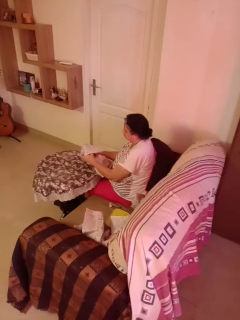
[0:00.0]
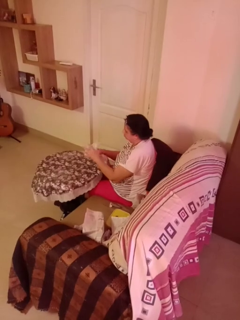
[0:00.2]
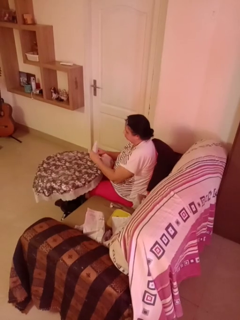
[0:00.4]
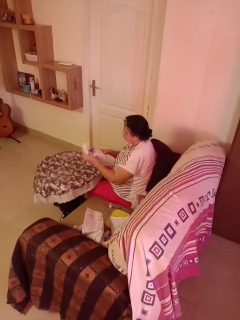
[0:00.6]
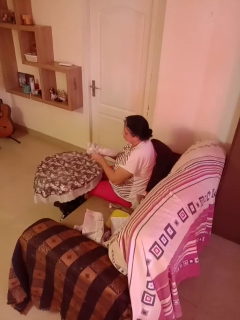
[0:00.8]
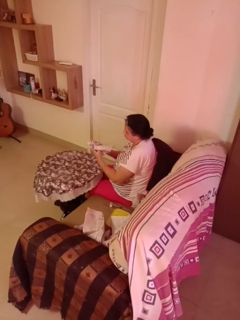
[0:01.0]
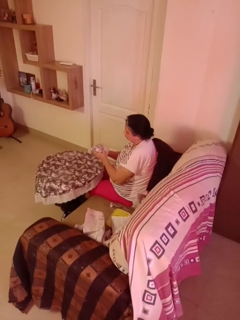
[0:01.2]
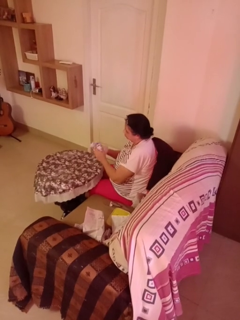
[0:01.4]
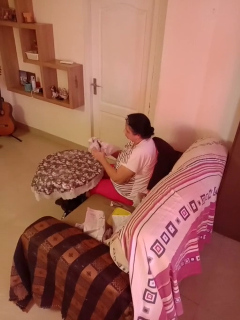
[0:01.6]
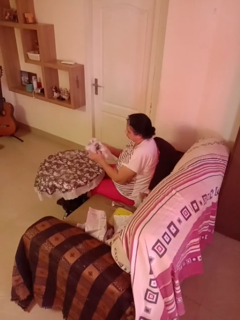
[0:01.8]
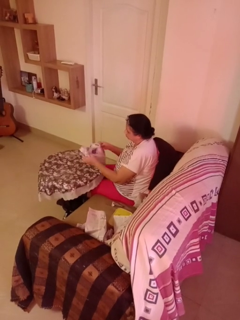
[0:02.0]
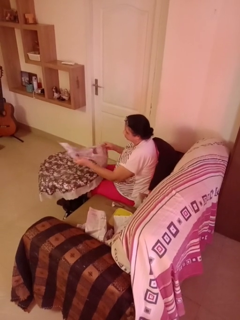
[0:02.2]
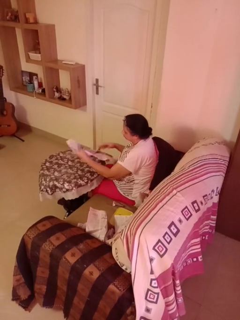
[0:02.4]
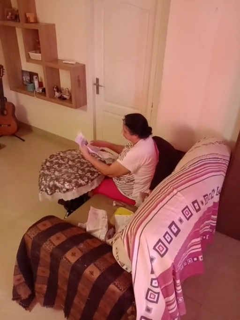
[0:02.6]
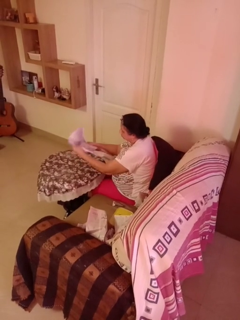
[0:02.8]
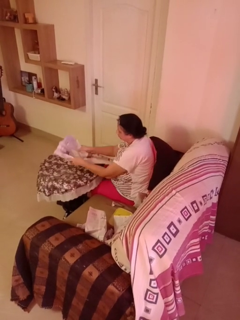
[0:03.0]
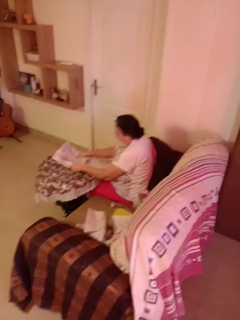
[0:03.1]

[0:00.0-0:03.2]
person crumples paper

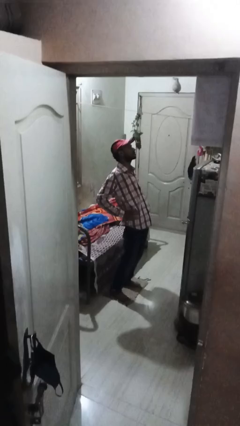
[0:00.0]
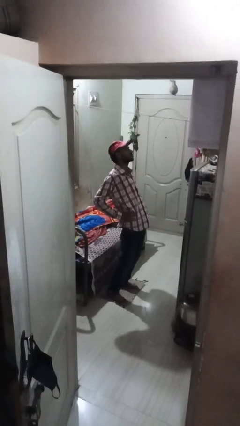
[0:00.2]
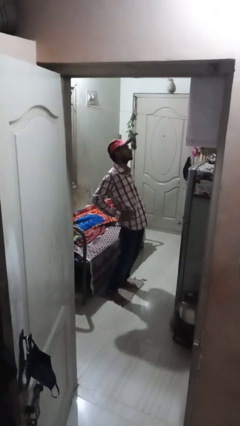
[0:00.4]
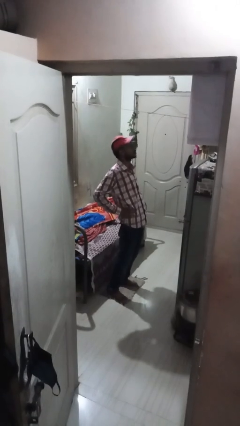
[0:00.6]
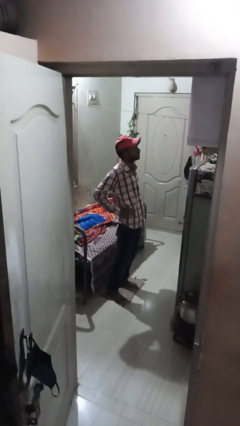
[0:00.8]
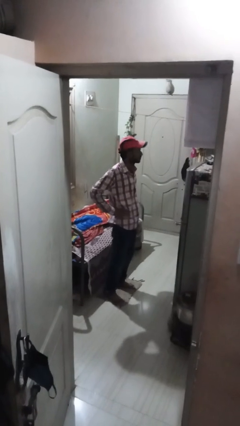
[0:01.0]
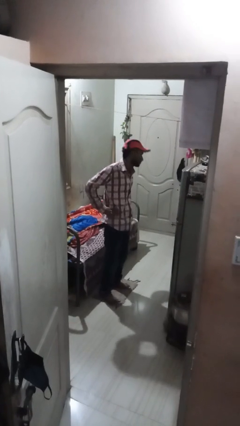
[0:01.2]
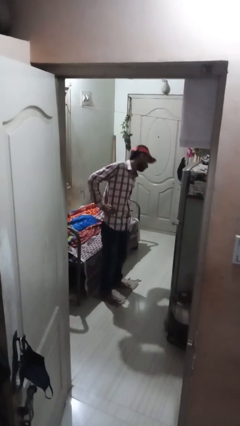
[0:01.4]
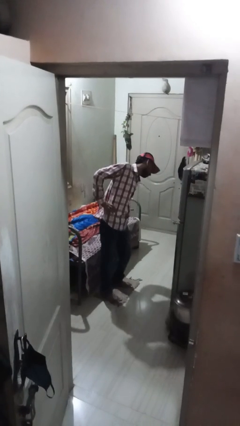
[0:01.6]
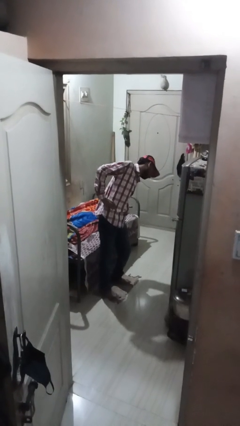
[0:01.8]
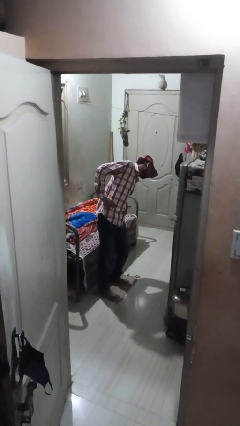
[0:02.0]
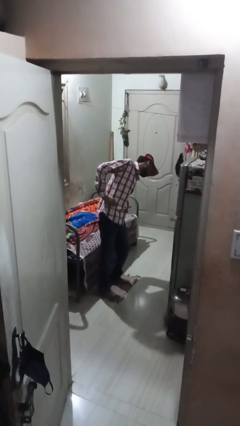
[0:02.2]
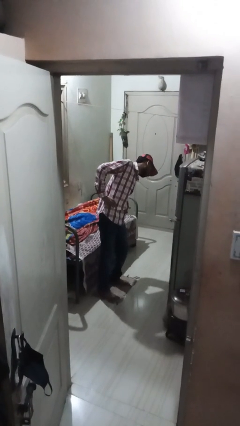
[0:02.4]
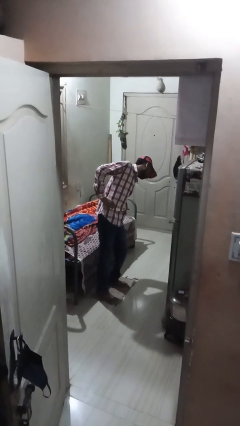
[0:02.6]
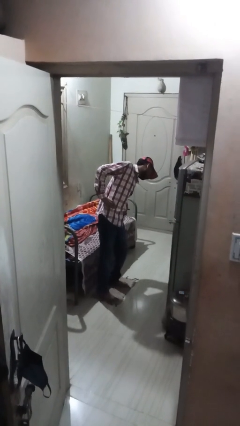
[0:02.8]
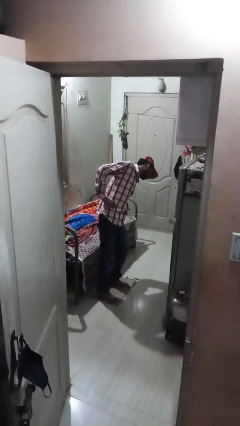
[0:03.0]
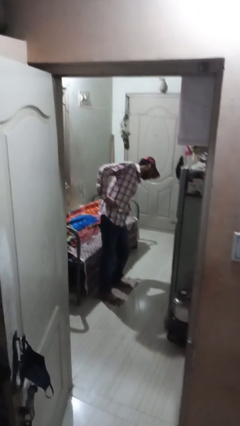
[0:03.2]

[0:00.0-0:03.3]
person stretches arms to side

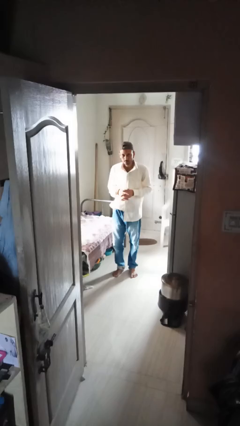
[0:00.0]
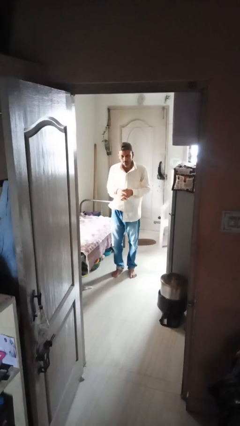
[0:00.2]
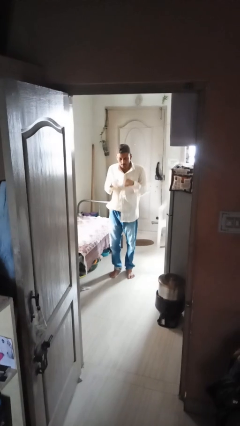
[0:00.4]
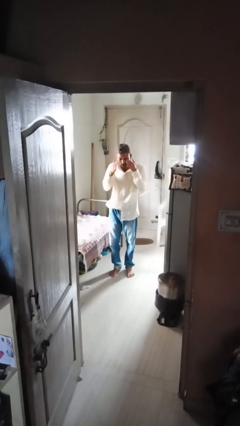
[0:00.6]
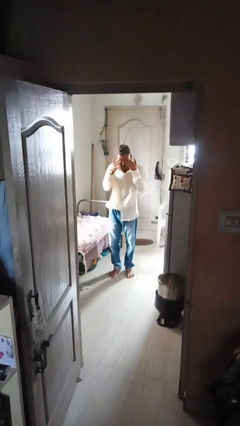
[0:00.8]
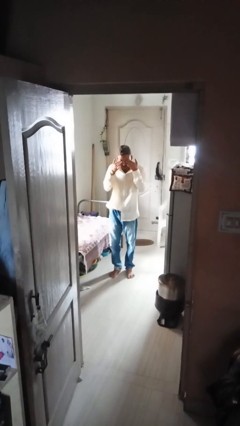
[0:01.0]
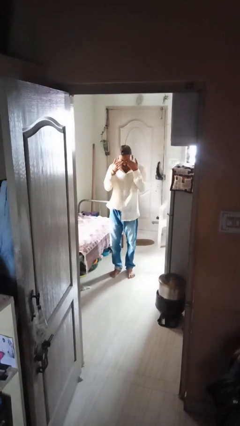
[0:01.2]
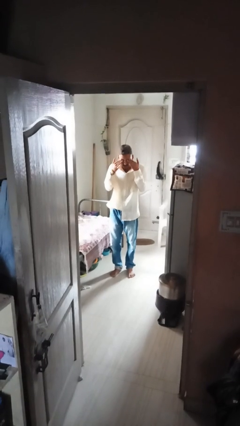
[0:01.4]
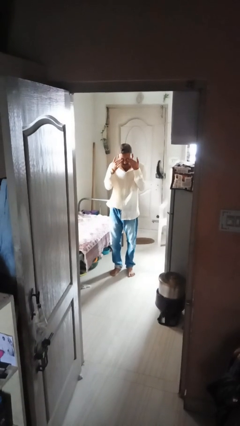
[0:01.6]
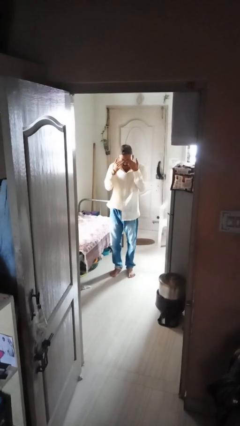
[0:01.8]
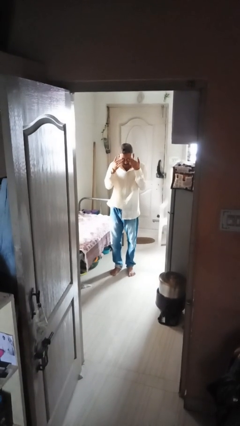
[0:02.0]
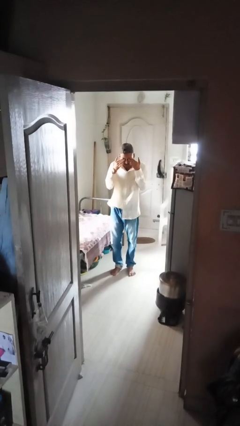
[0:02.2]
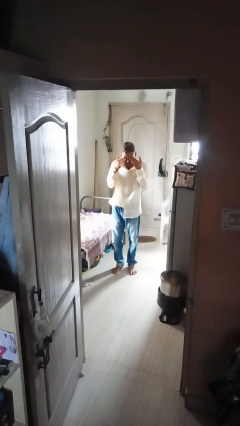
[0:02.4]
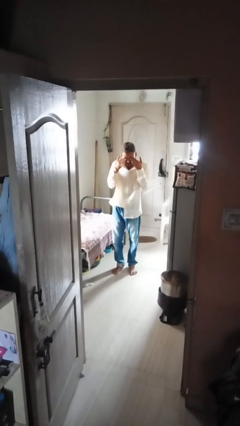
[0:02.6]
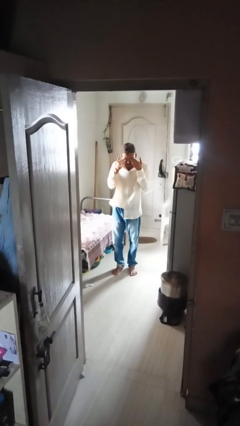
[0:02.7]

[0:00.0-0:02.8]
person rubs eyes

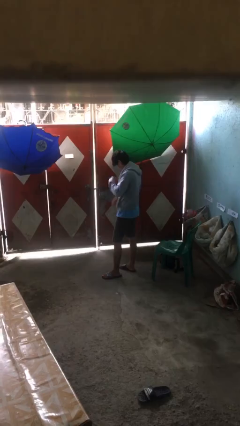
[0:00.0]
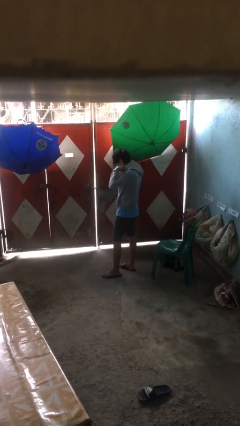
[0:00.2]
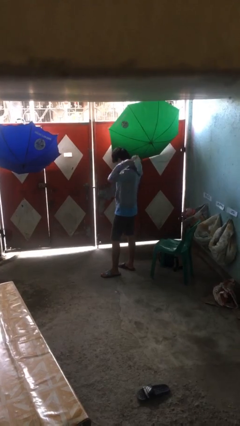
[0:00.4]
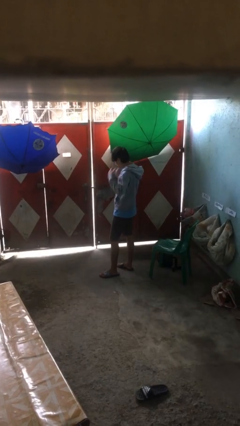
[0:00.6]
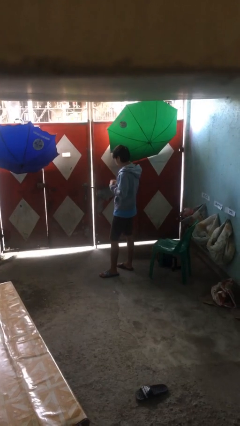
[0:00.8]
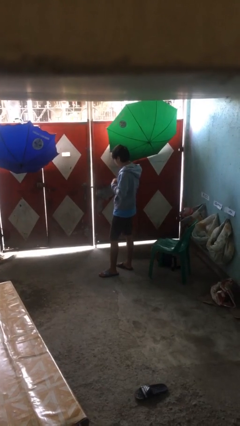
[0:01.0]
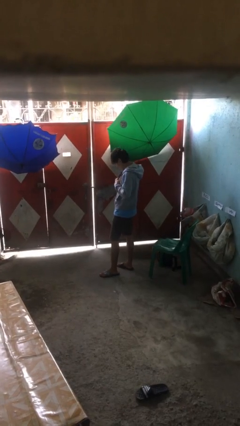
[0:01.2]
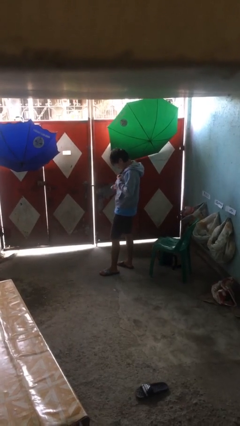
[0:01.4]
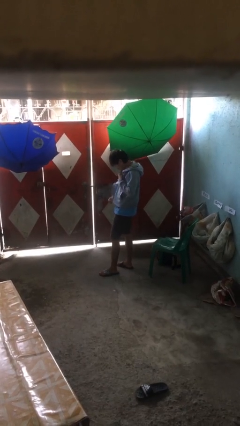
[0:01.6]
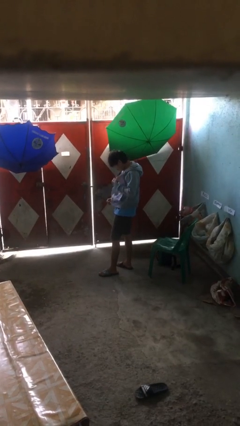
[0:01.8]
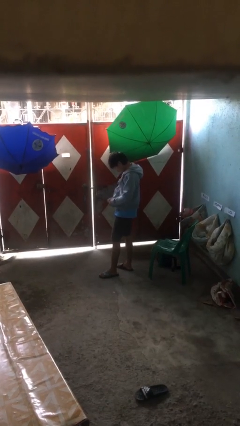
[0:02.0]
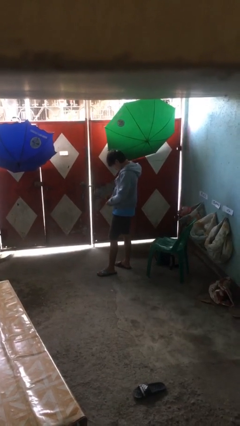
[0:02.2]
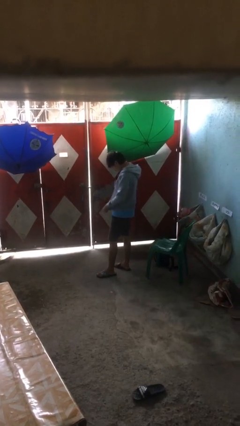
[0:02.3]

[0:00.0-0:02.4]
person unzips jacket

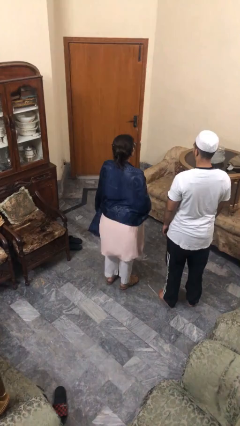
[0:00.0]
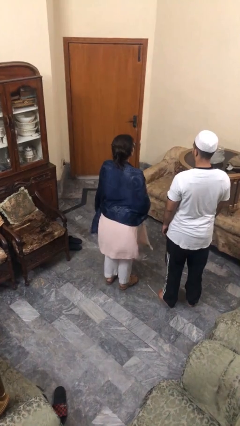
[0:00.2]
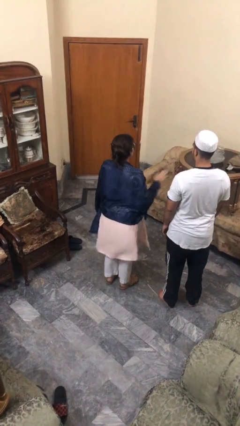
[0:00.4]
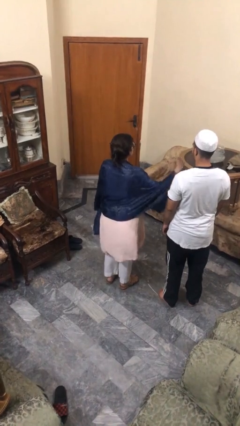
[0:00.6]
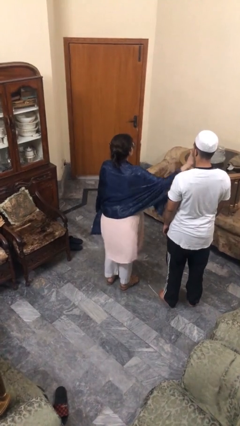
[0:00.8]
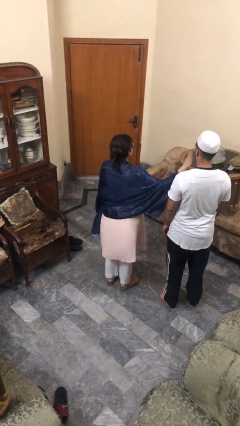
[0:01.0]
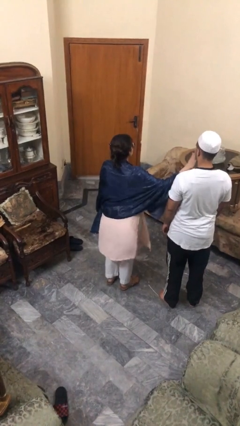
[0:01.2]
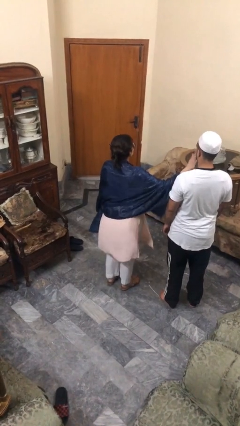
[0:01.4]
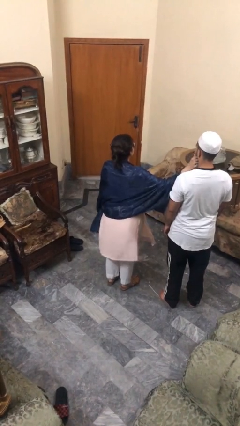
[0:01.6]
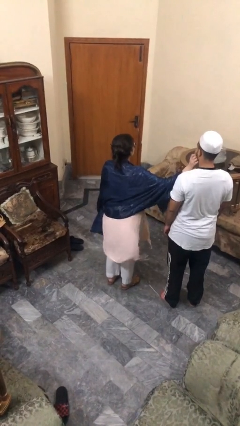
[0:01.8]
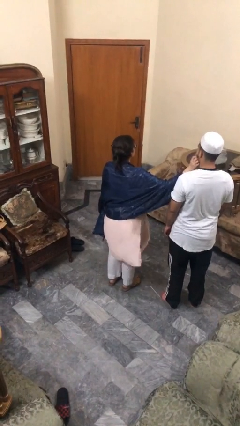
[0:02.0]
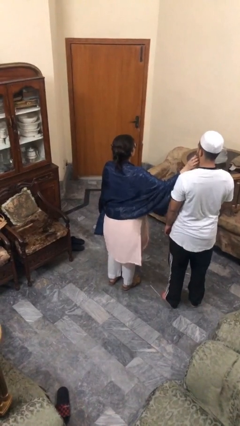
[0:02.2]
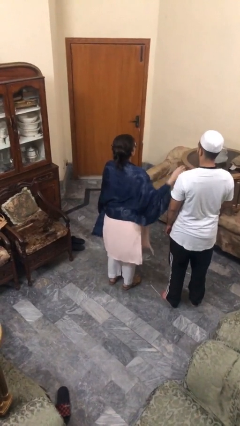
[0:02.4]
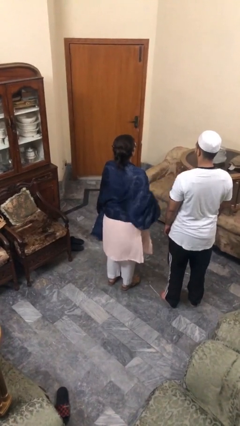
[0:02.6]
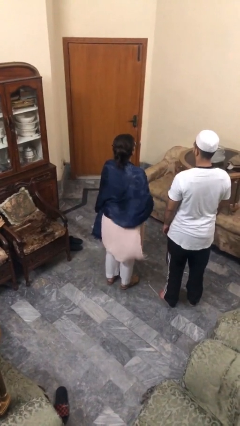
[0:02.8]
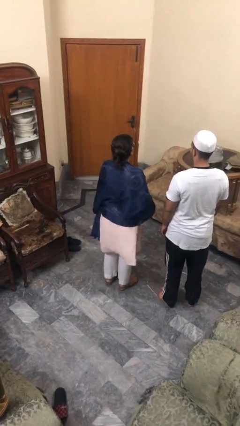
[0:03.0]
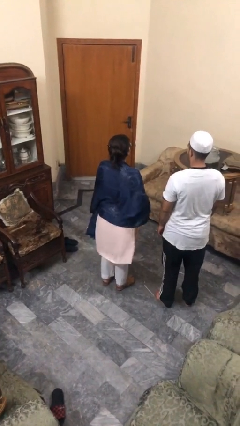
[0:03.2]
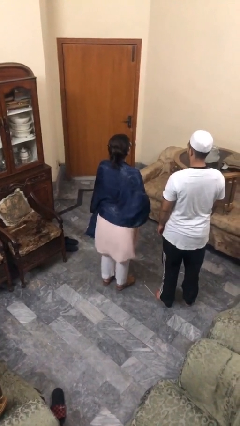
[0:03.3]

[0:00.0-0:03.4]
person touches face of person

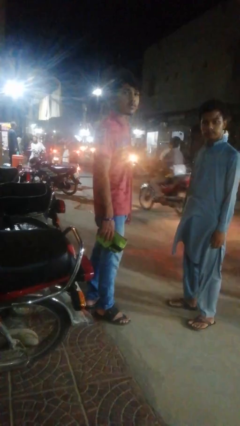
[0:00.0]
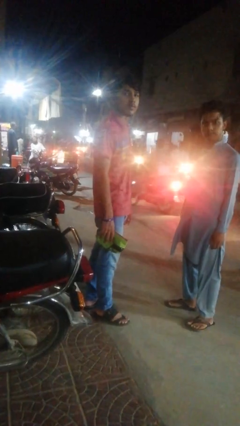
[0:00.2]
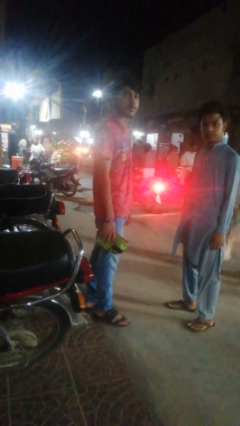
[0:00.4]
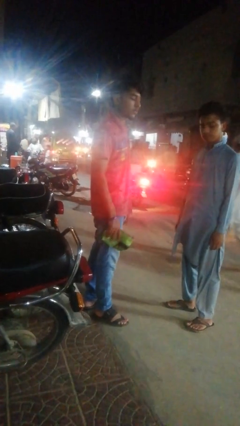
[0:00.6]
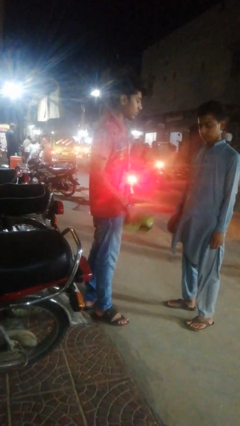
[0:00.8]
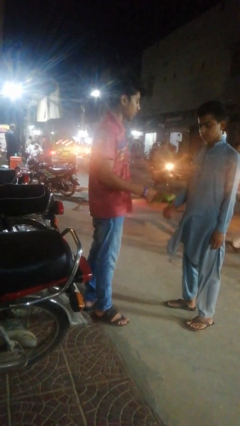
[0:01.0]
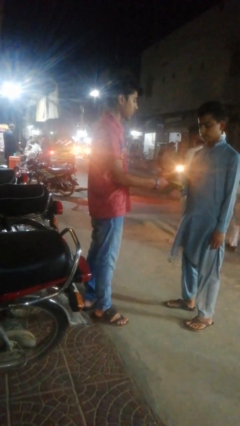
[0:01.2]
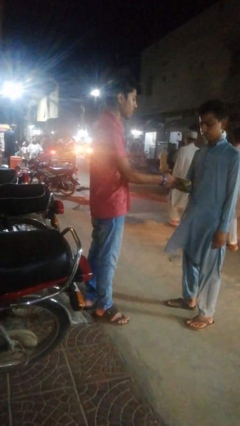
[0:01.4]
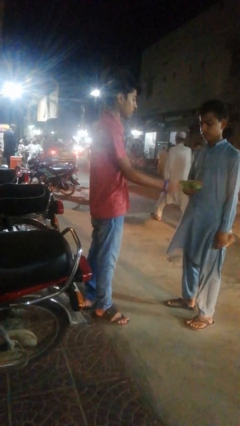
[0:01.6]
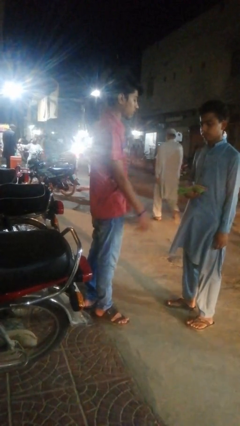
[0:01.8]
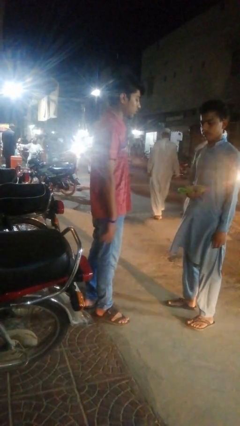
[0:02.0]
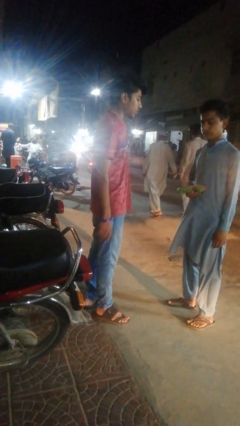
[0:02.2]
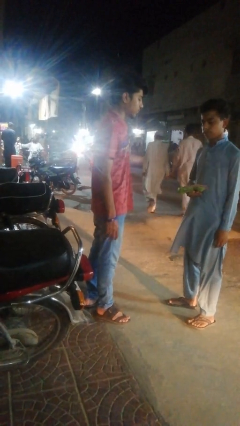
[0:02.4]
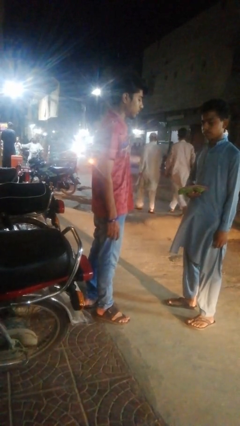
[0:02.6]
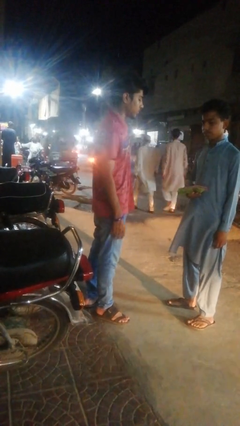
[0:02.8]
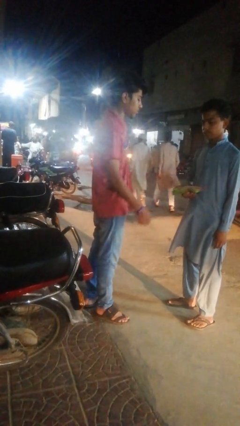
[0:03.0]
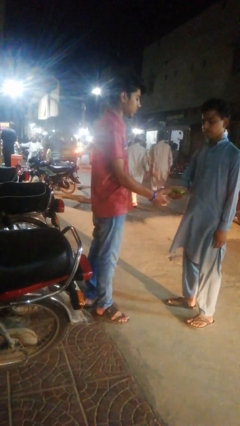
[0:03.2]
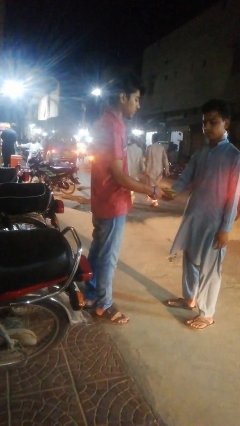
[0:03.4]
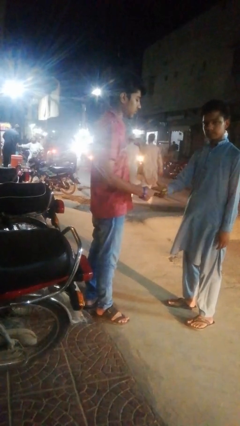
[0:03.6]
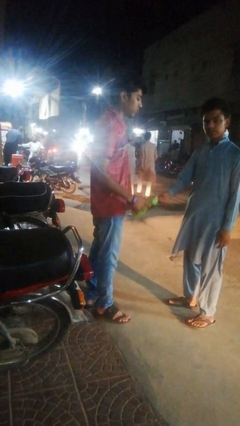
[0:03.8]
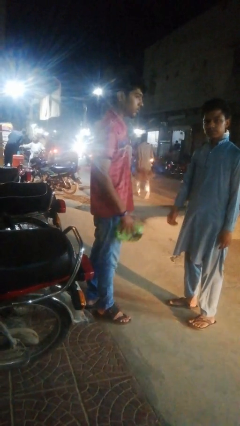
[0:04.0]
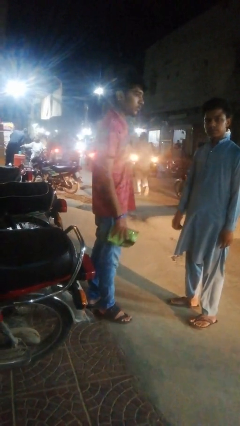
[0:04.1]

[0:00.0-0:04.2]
person transfers object to person
